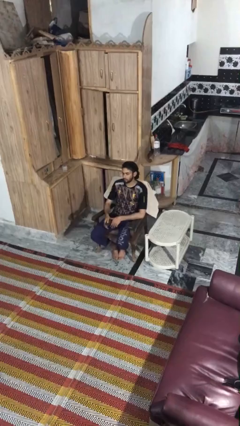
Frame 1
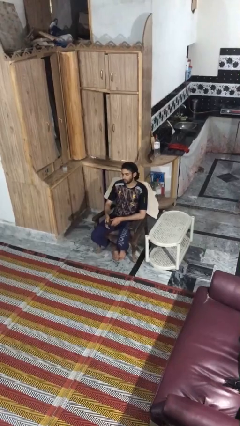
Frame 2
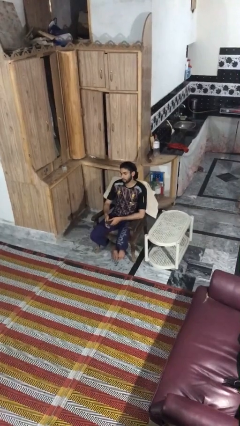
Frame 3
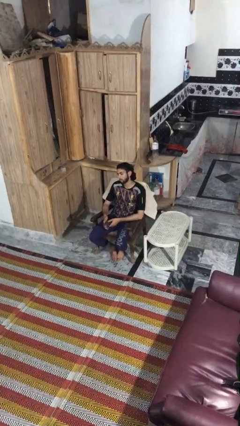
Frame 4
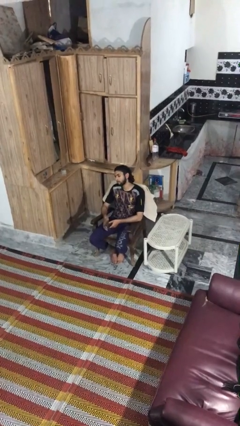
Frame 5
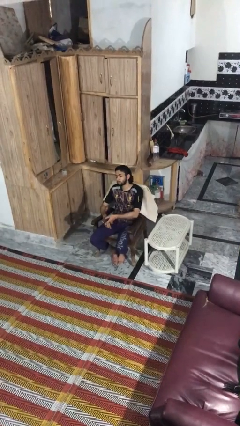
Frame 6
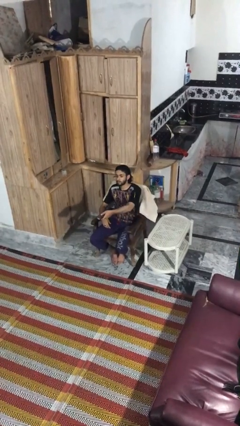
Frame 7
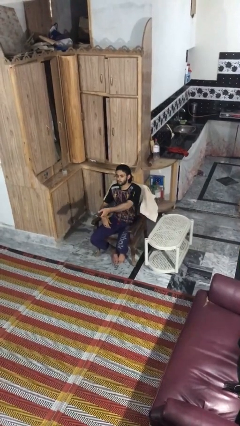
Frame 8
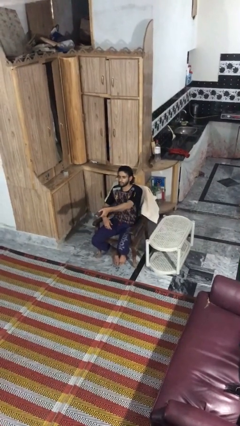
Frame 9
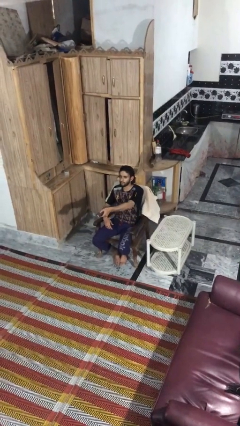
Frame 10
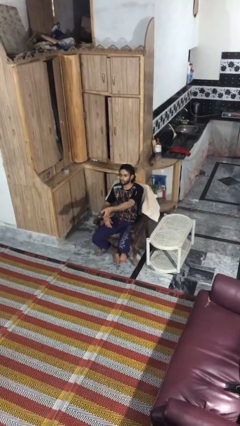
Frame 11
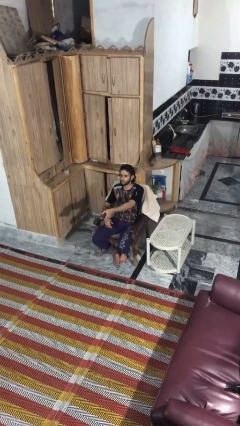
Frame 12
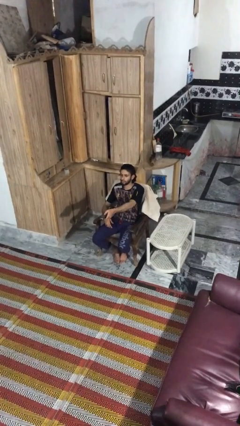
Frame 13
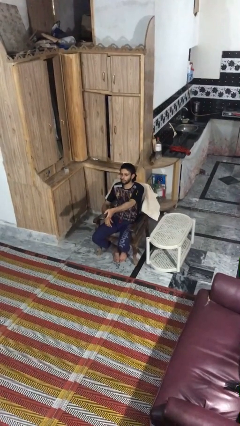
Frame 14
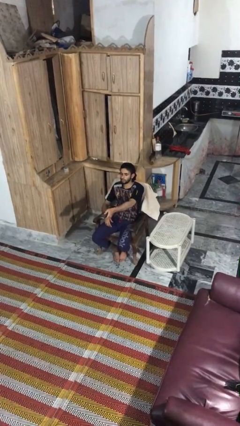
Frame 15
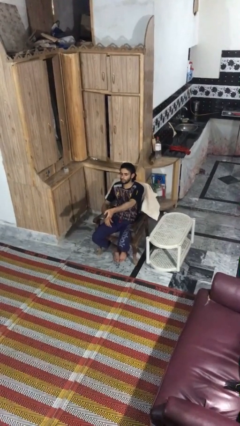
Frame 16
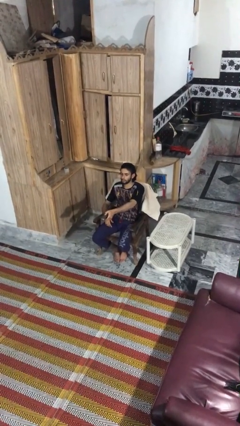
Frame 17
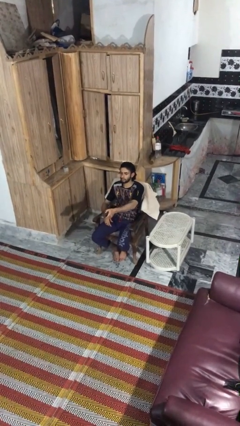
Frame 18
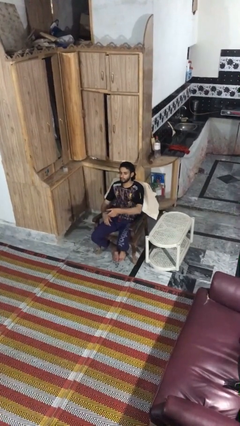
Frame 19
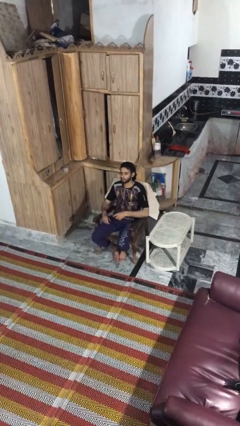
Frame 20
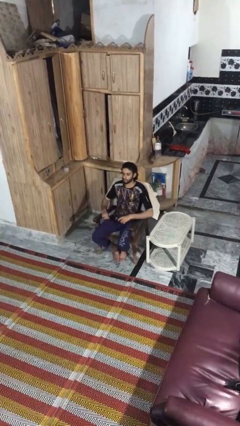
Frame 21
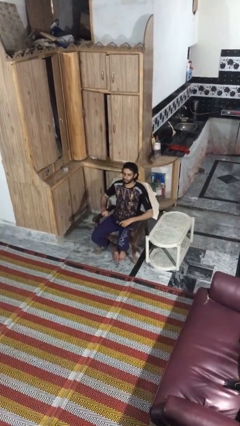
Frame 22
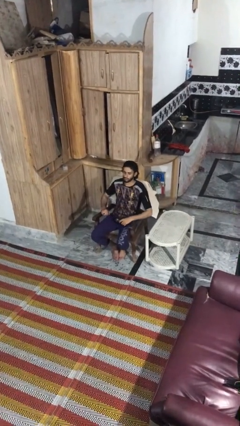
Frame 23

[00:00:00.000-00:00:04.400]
person uses television remote

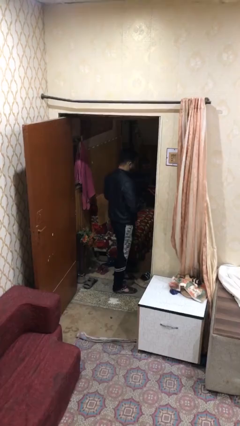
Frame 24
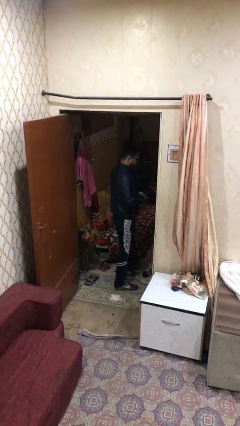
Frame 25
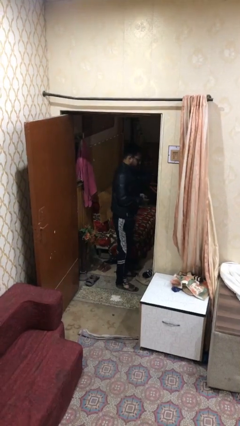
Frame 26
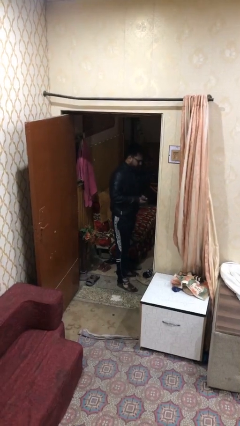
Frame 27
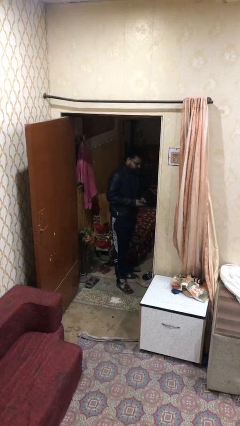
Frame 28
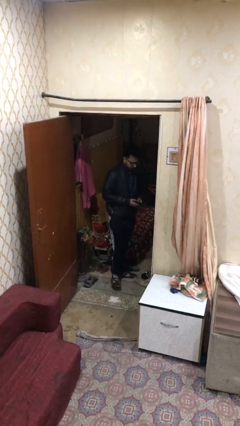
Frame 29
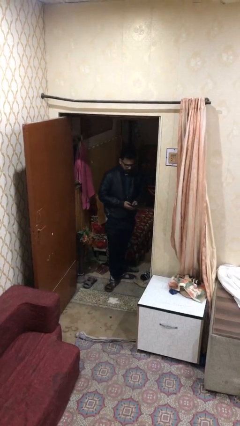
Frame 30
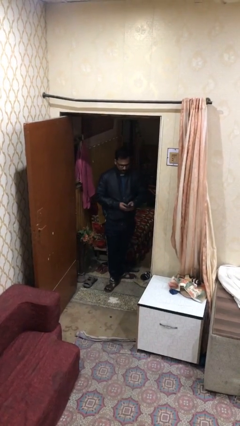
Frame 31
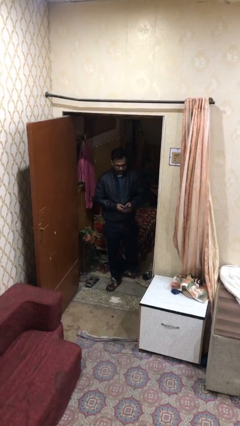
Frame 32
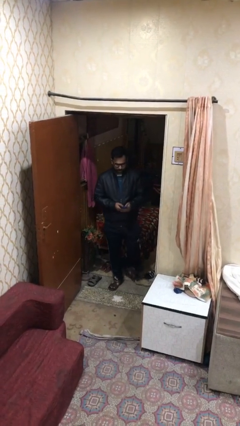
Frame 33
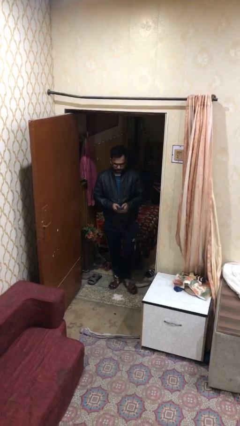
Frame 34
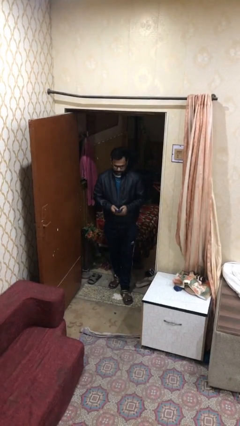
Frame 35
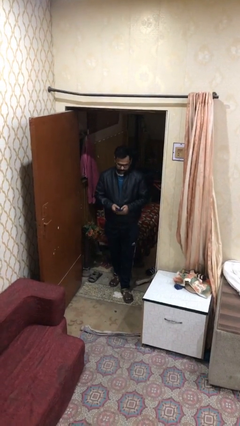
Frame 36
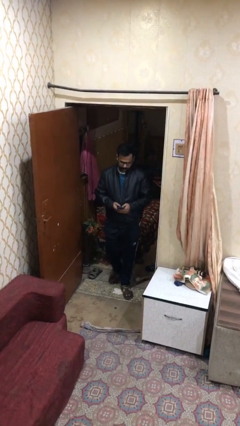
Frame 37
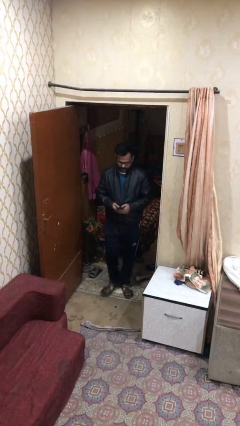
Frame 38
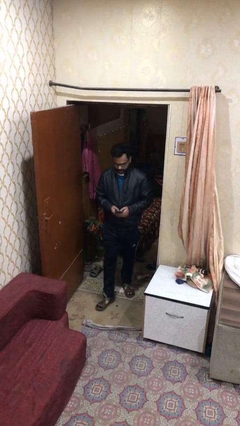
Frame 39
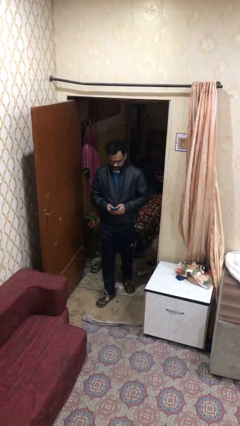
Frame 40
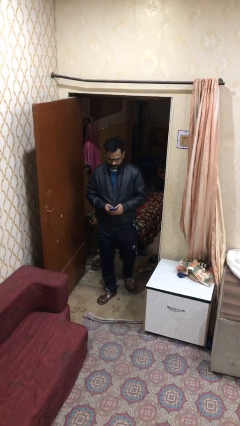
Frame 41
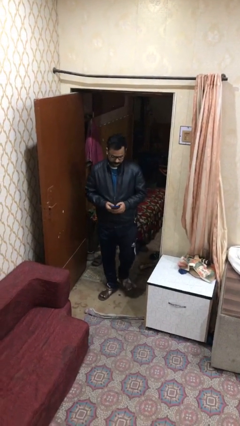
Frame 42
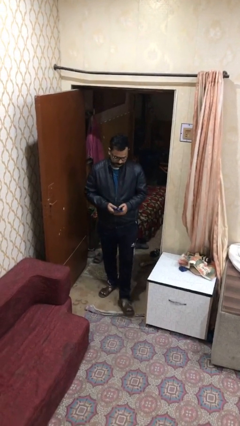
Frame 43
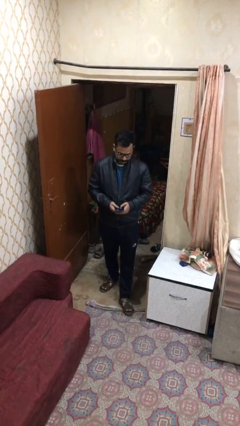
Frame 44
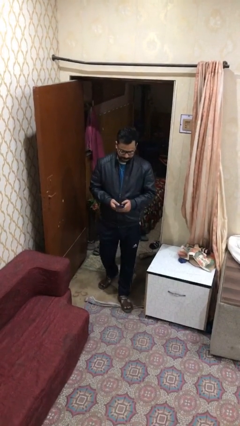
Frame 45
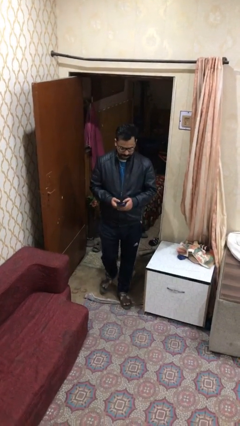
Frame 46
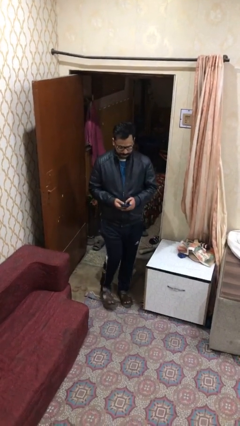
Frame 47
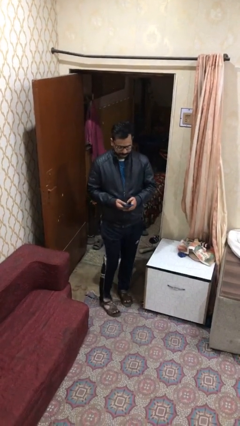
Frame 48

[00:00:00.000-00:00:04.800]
person enters scene through structure

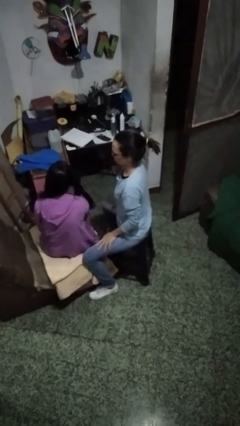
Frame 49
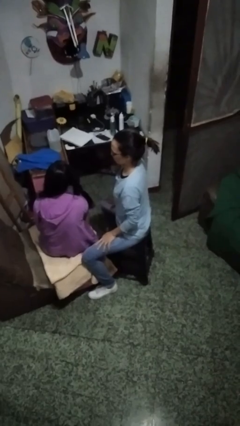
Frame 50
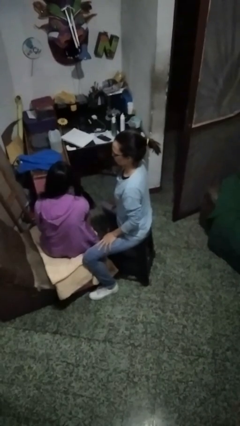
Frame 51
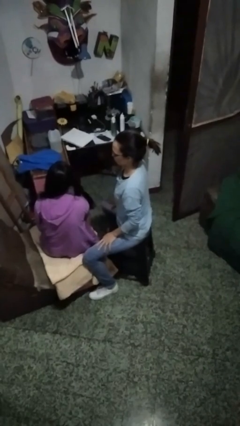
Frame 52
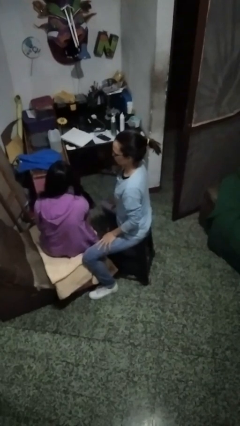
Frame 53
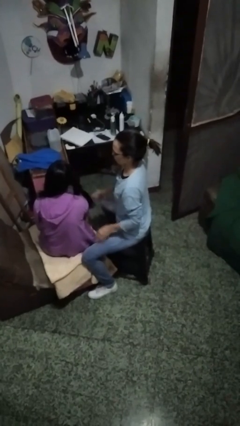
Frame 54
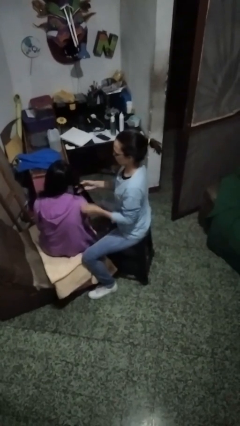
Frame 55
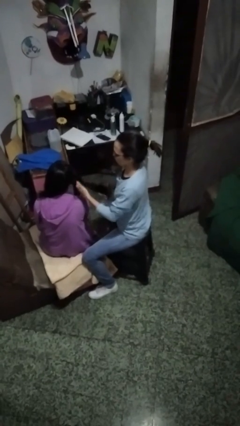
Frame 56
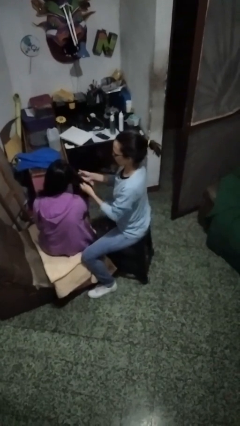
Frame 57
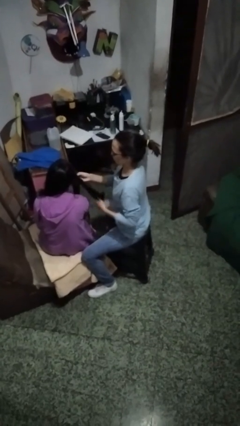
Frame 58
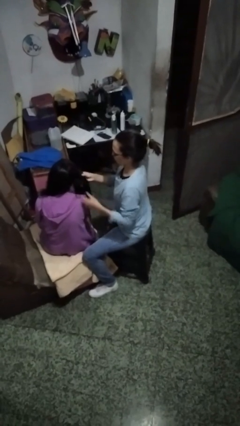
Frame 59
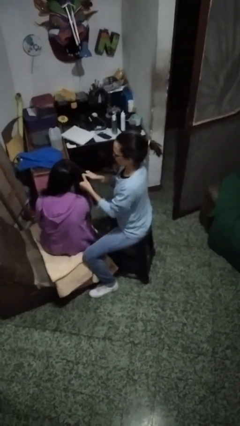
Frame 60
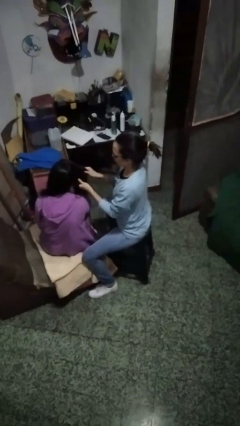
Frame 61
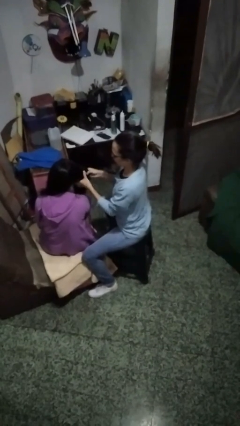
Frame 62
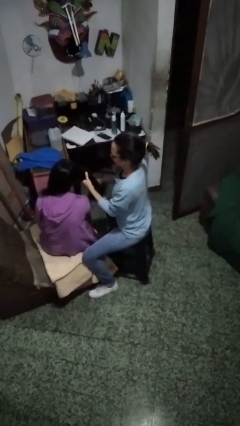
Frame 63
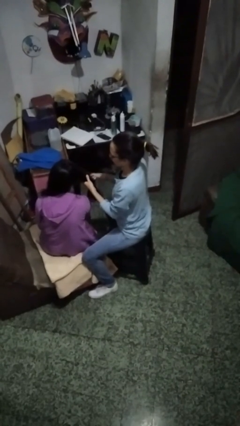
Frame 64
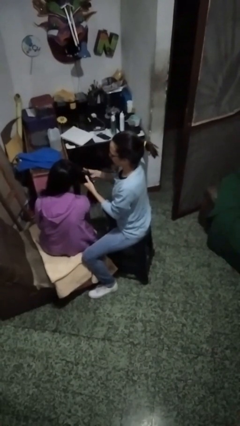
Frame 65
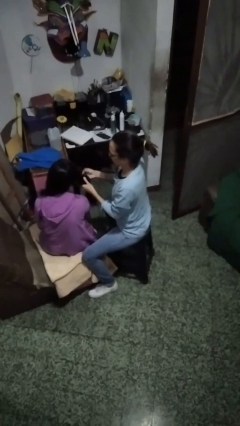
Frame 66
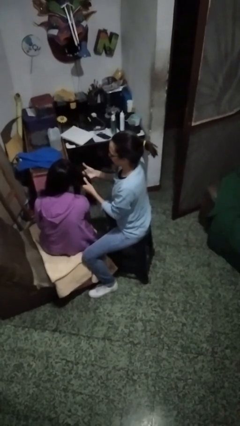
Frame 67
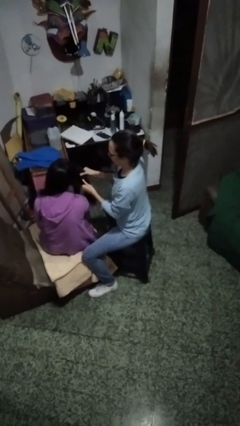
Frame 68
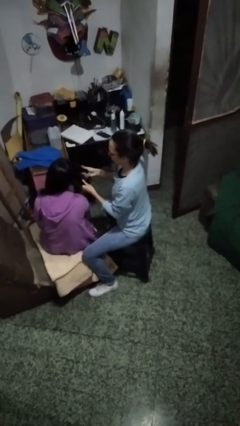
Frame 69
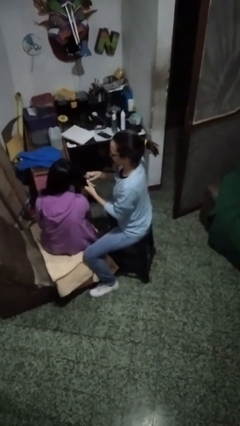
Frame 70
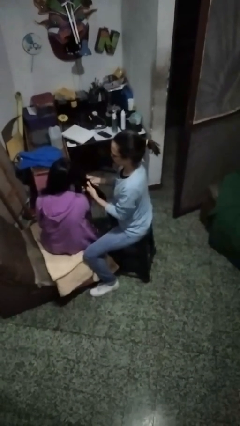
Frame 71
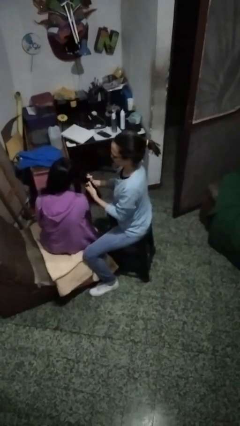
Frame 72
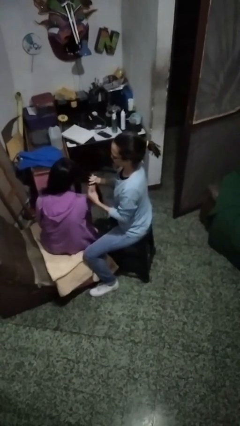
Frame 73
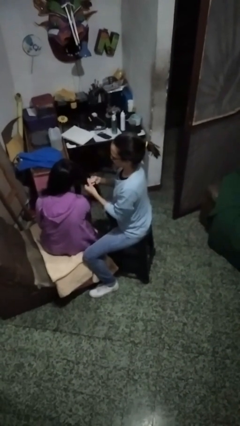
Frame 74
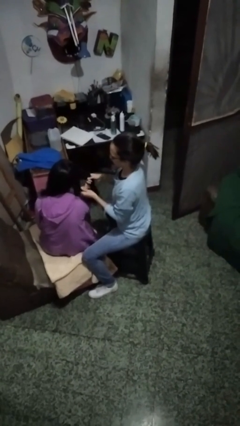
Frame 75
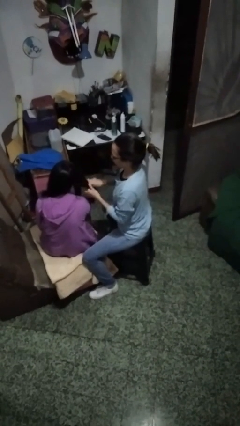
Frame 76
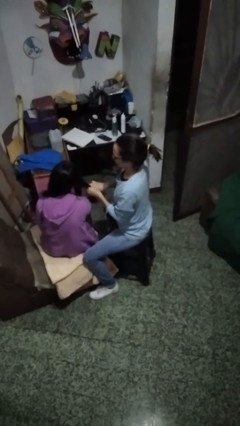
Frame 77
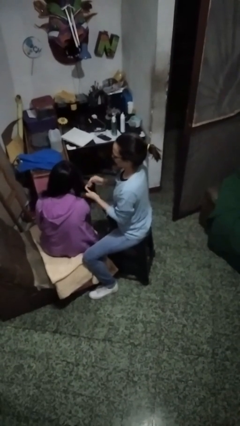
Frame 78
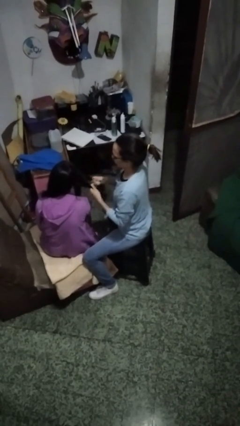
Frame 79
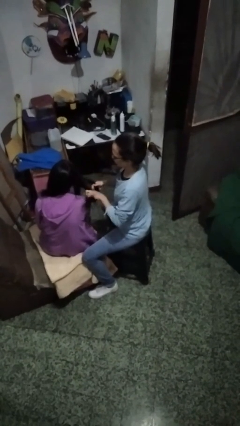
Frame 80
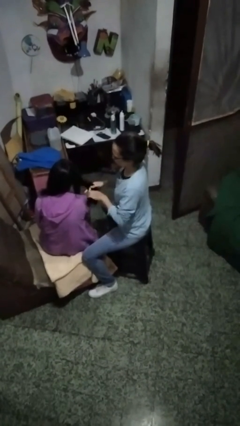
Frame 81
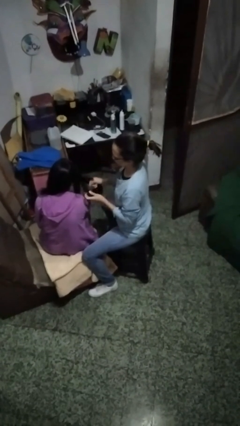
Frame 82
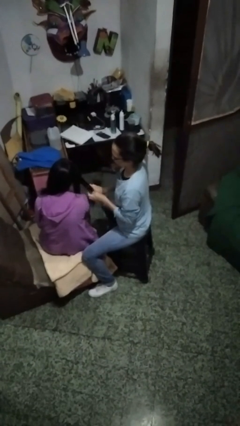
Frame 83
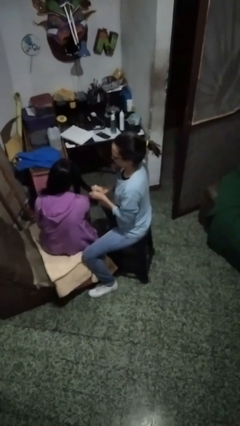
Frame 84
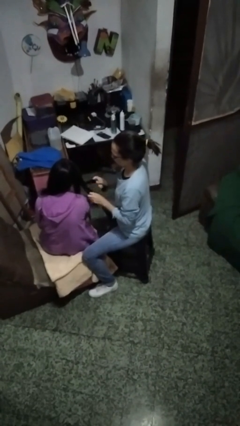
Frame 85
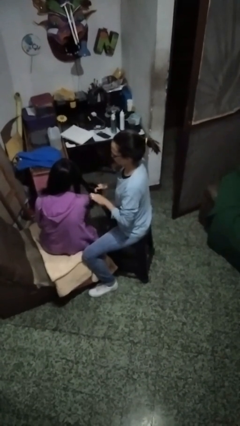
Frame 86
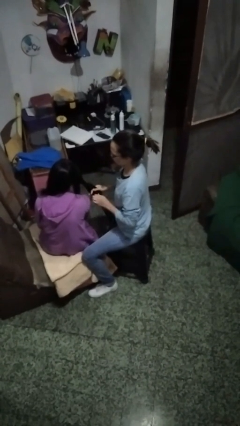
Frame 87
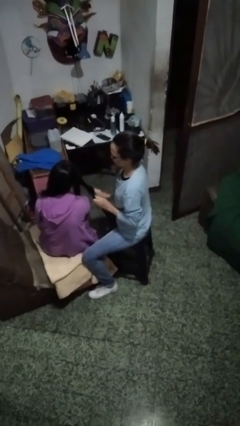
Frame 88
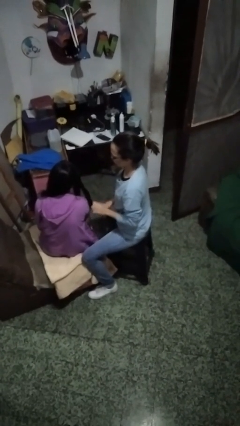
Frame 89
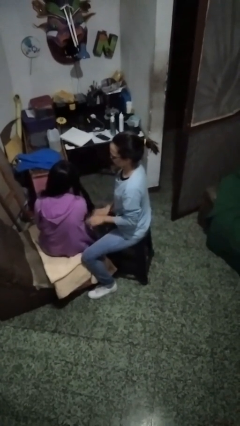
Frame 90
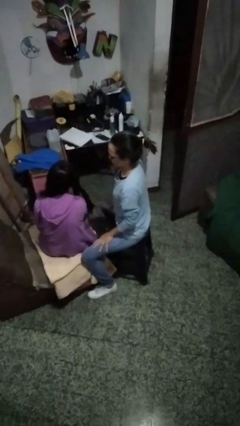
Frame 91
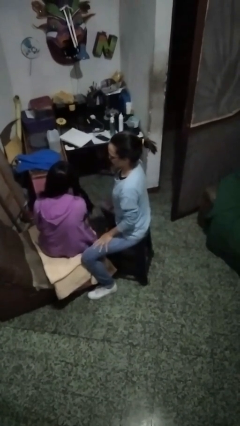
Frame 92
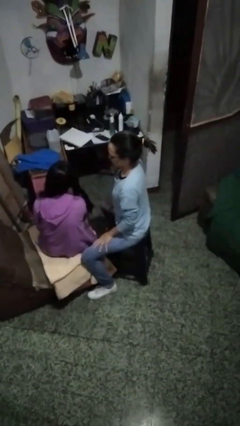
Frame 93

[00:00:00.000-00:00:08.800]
person braids hair of person
